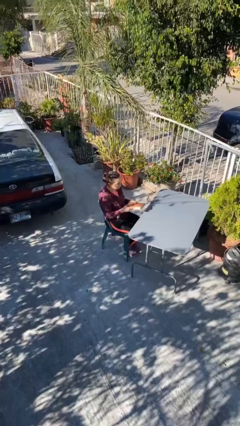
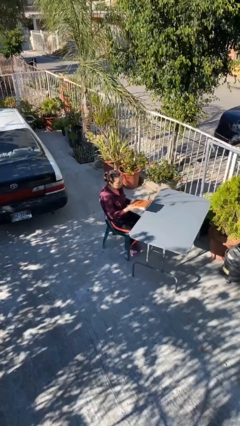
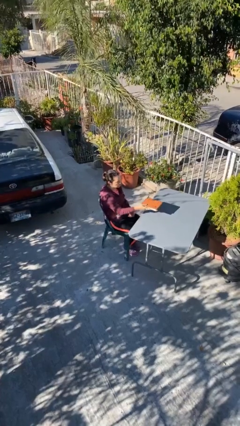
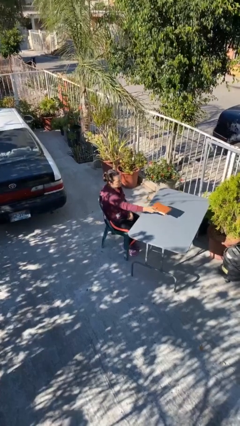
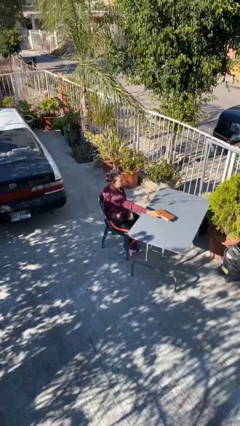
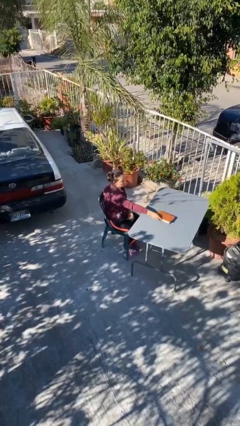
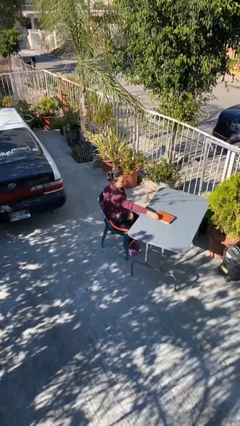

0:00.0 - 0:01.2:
person puts down object on table

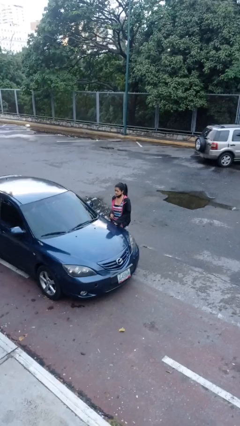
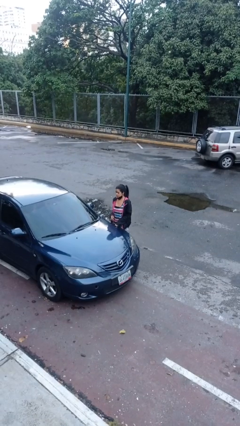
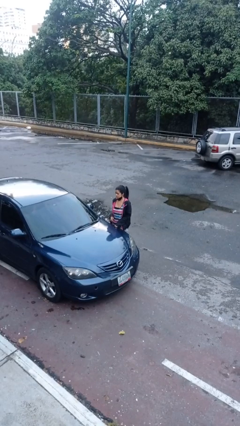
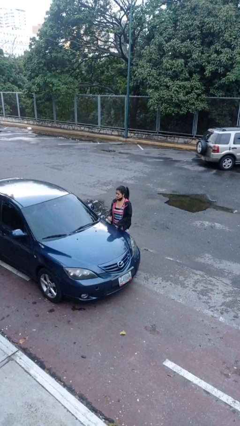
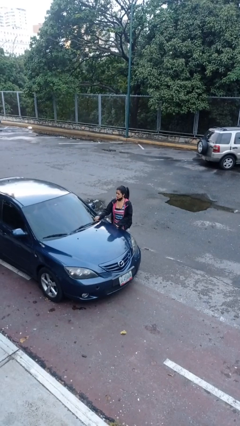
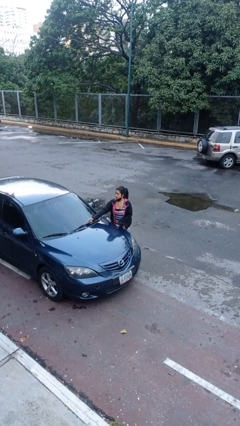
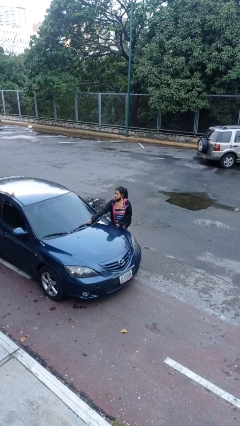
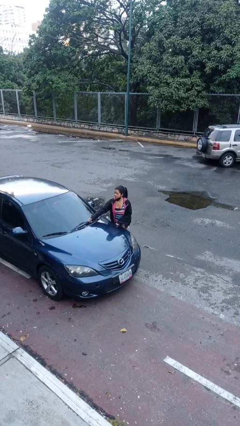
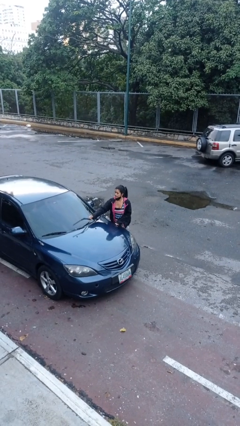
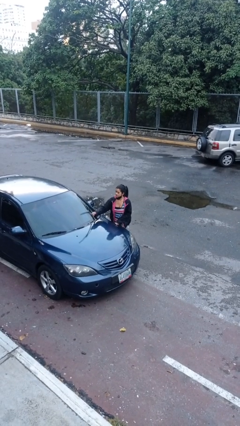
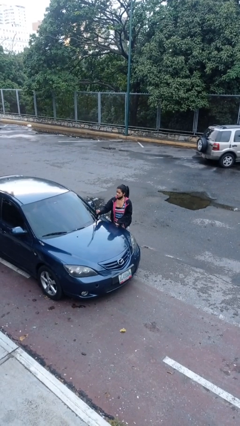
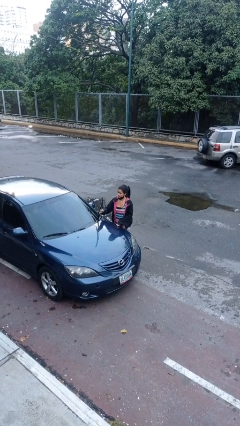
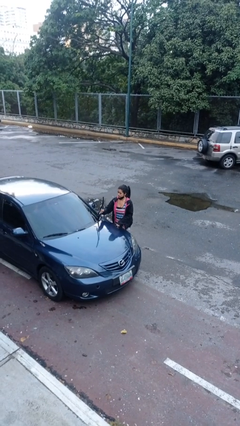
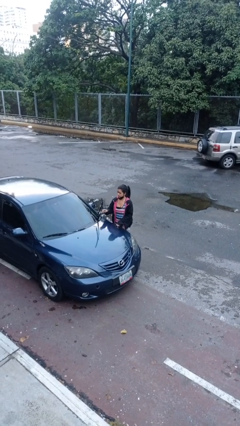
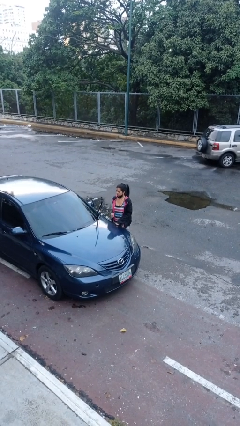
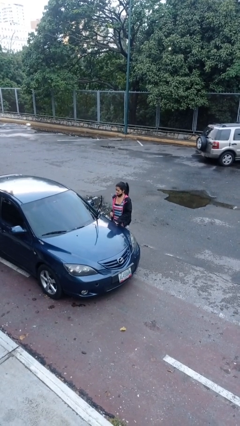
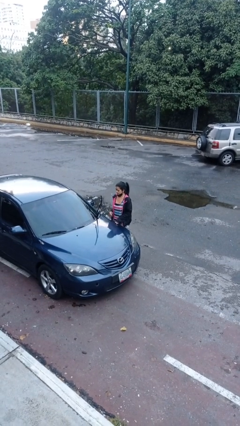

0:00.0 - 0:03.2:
person flips up car wipers

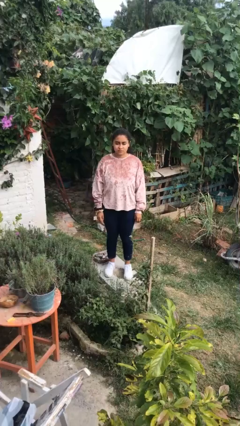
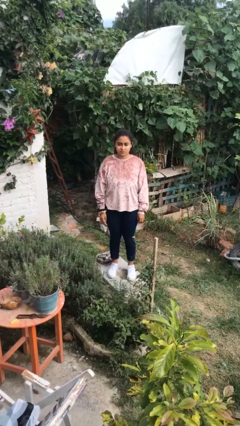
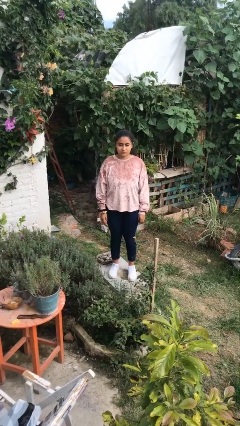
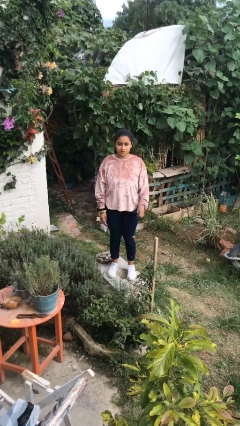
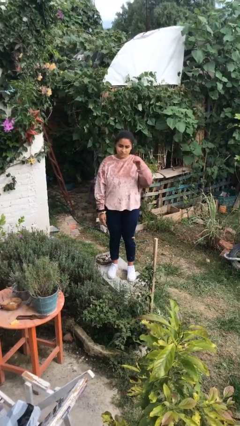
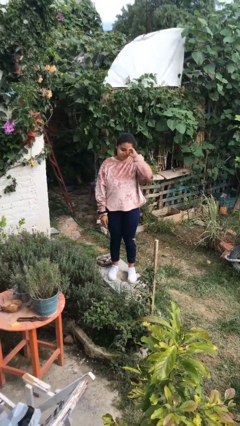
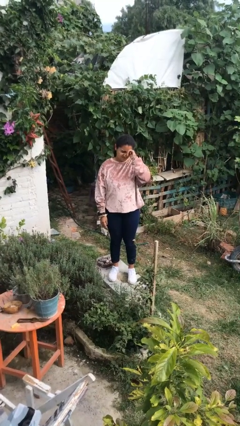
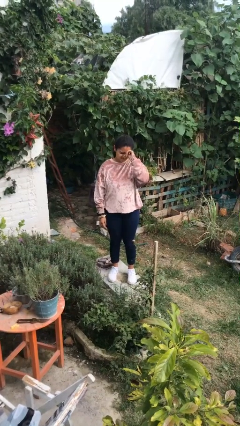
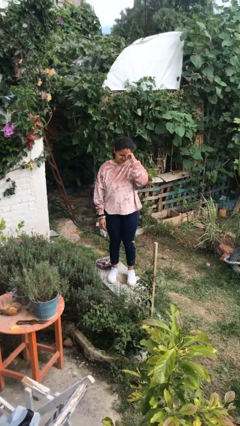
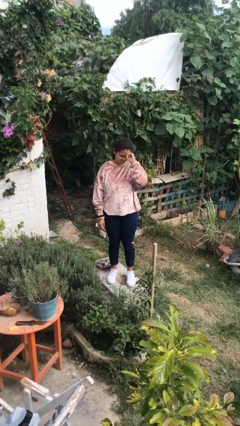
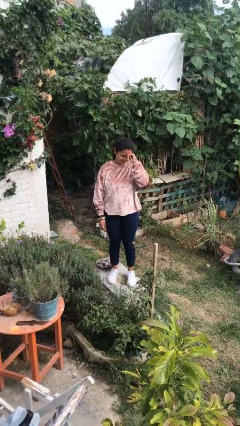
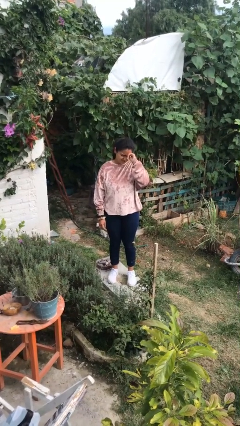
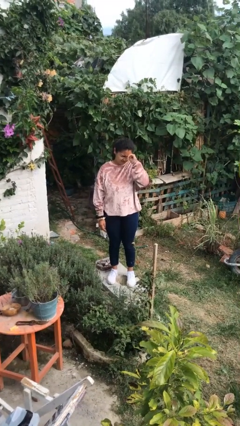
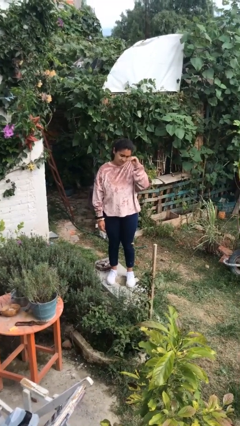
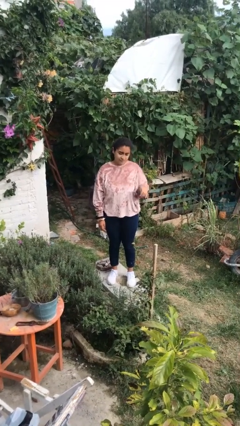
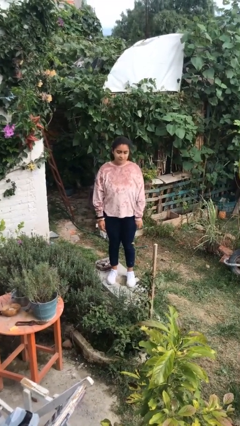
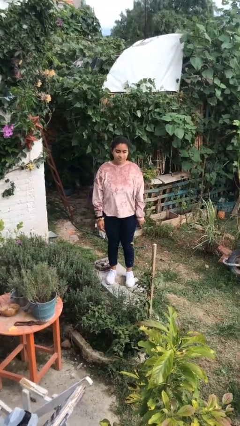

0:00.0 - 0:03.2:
person rubs eyes

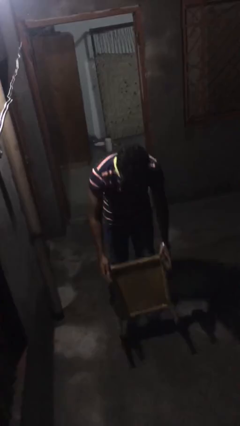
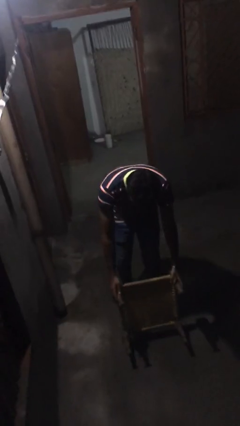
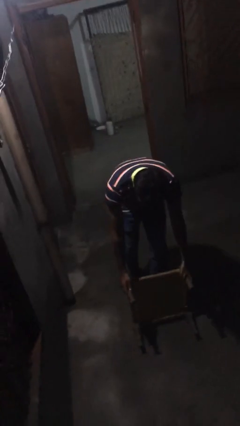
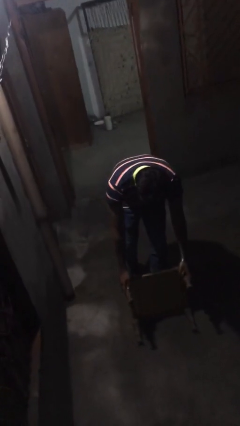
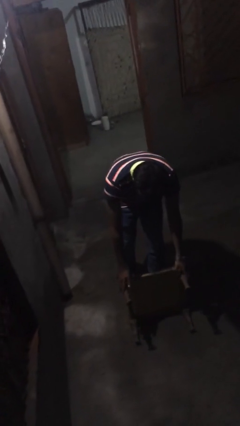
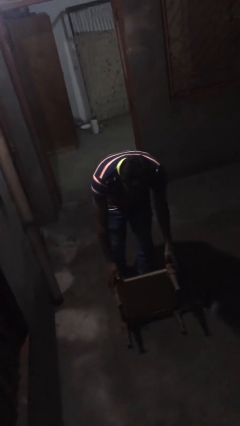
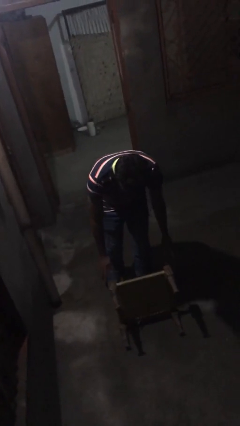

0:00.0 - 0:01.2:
person puts down object on floor

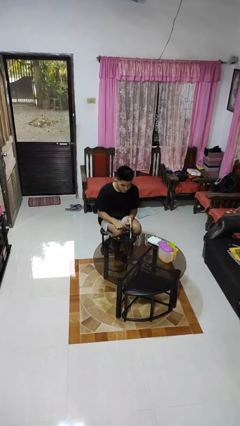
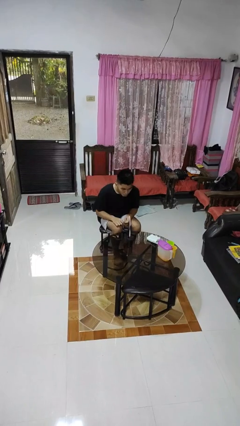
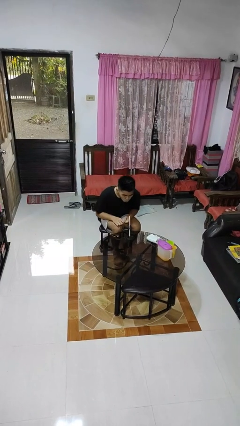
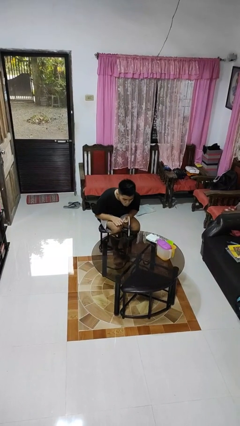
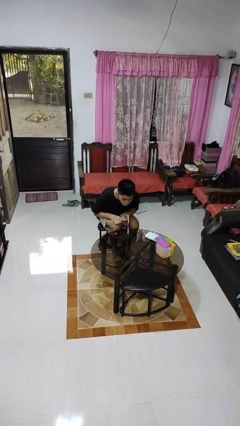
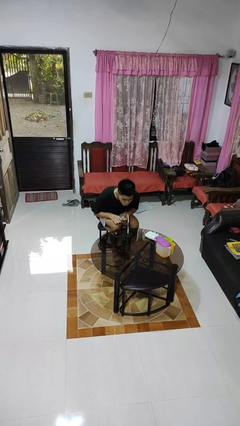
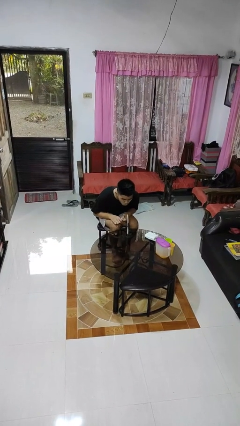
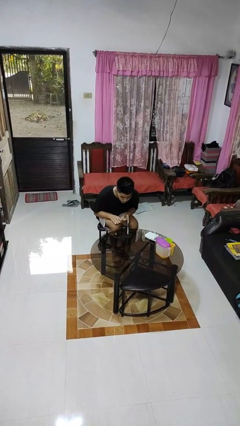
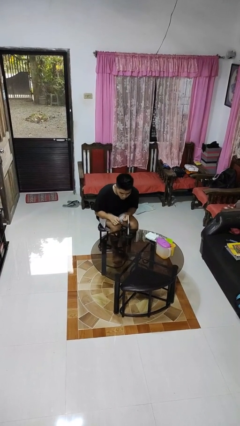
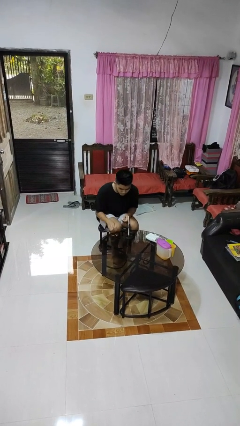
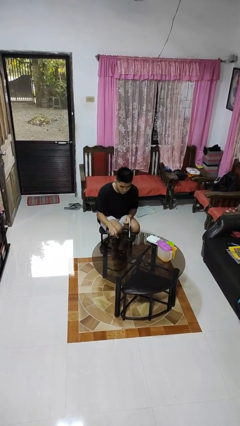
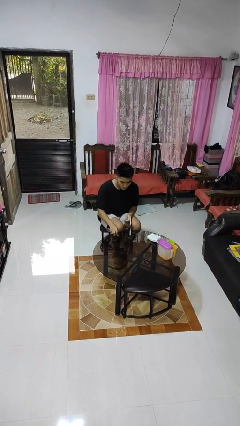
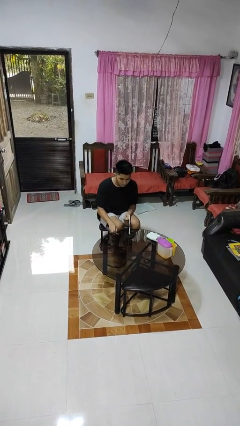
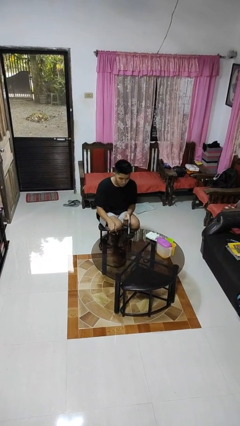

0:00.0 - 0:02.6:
person extinguishes candle

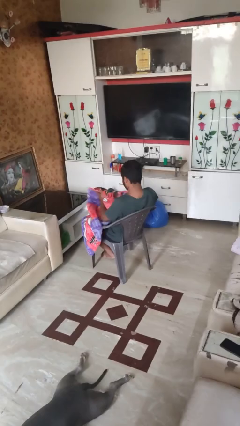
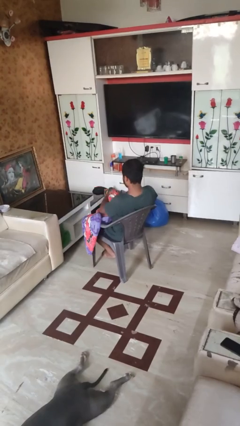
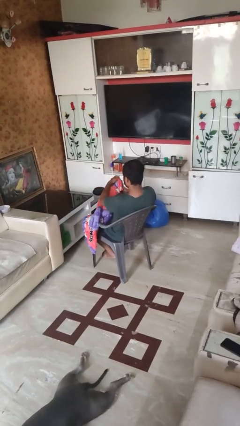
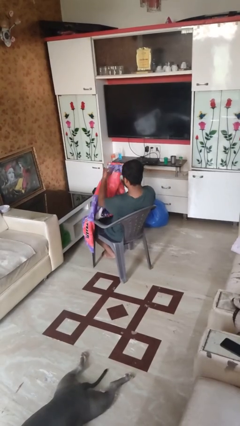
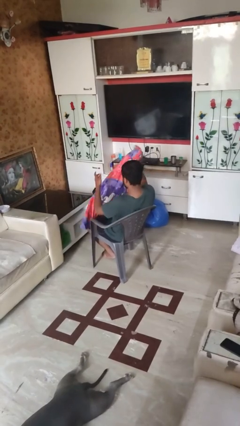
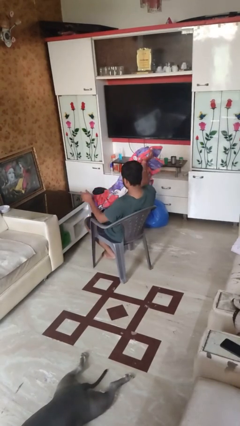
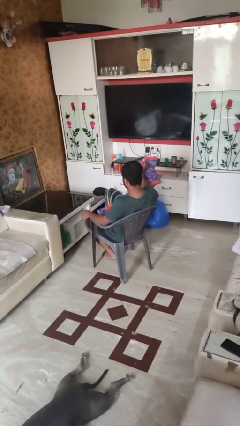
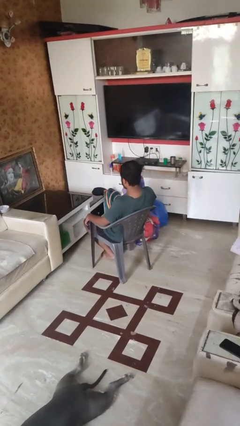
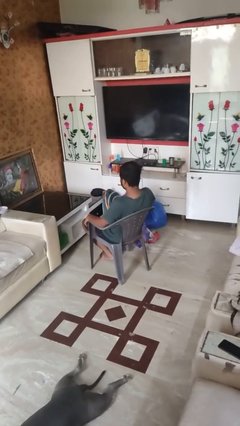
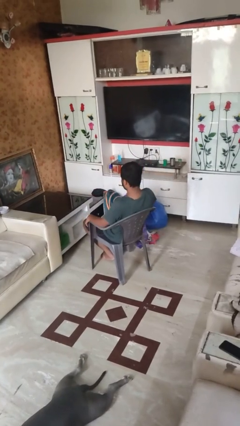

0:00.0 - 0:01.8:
person uncovers with blanket

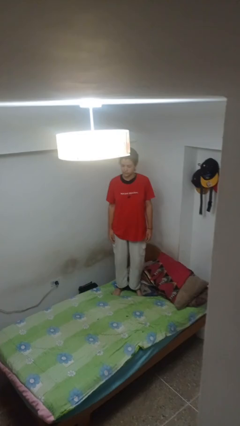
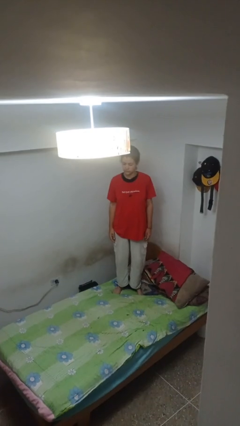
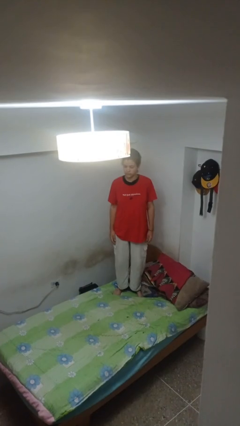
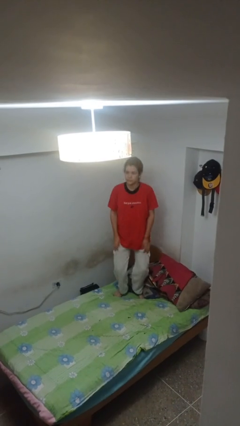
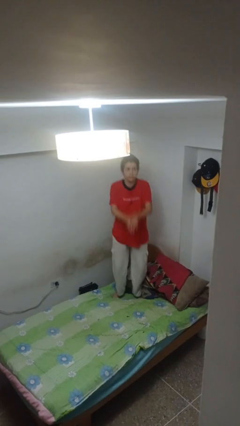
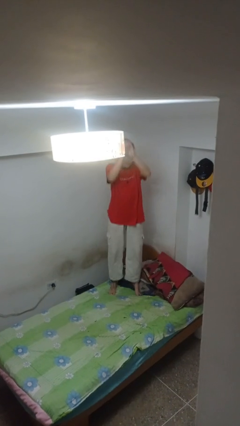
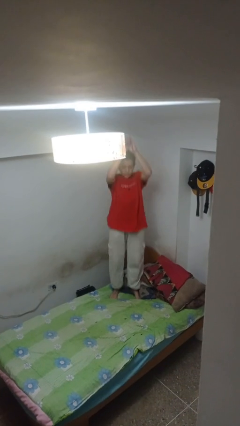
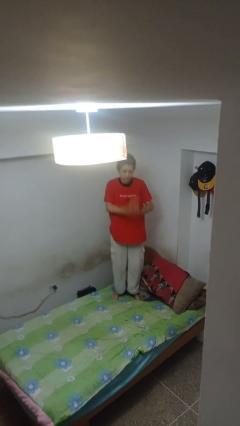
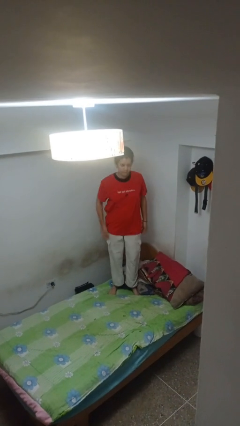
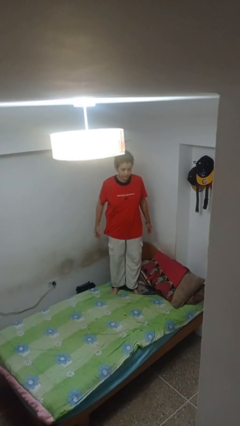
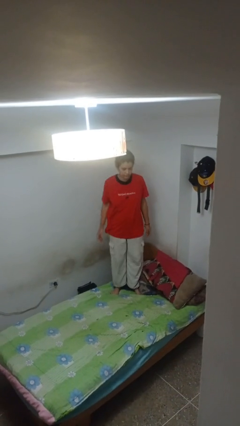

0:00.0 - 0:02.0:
person jumps on bed

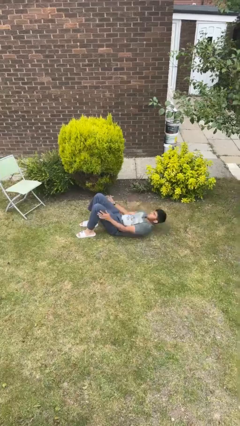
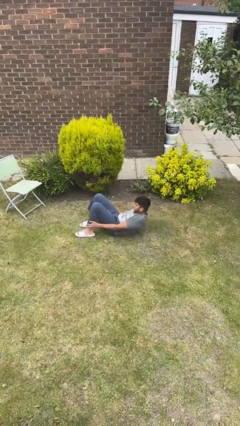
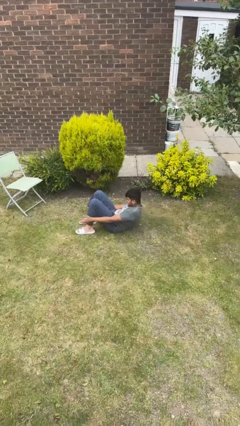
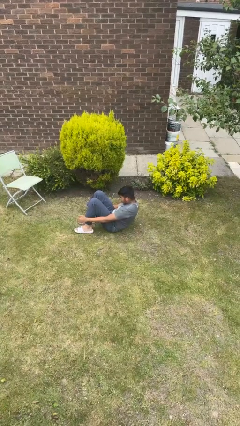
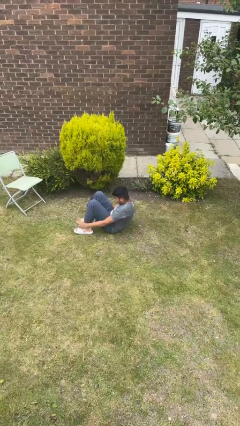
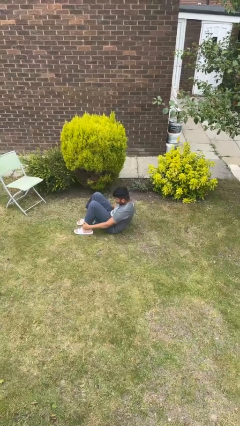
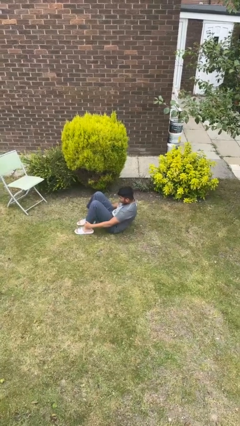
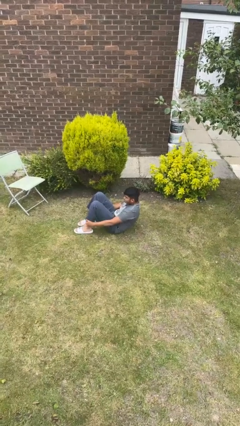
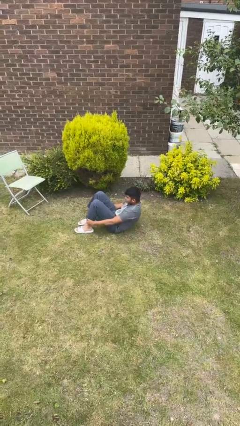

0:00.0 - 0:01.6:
person exercises with situp
